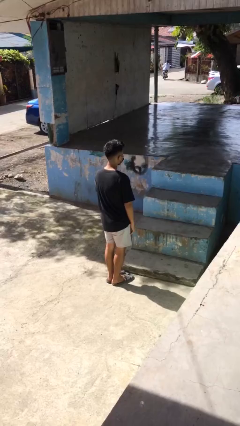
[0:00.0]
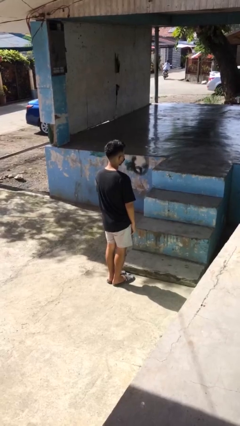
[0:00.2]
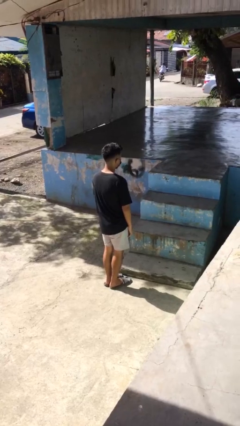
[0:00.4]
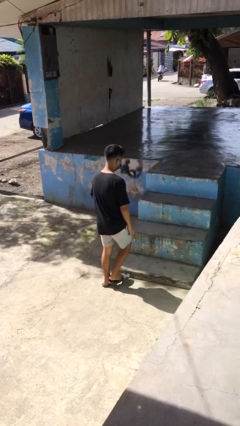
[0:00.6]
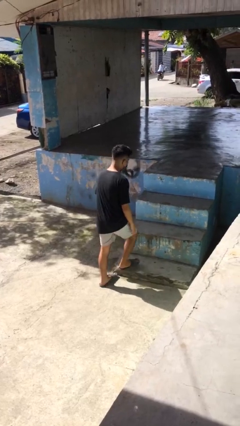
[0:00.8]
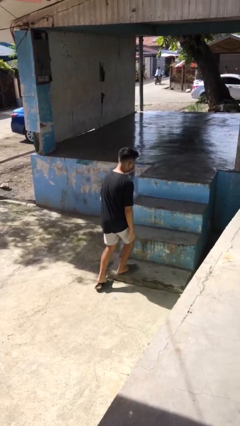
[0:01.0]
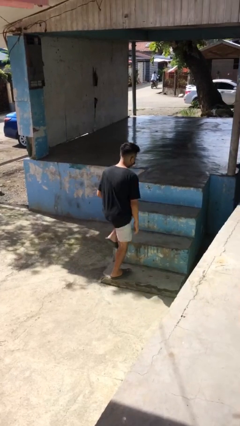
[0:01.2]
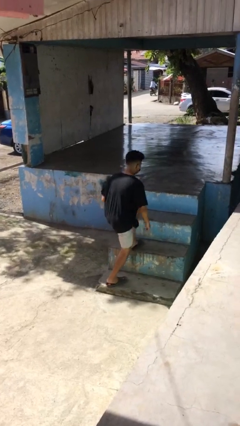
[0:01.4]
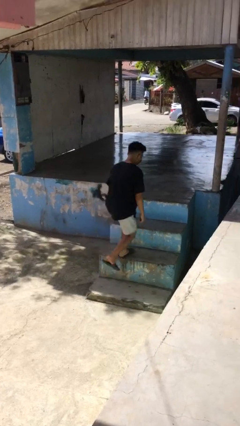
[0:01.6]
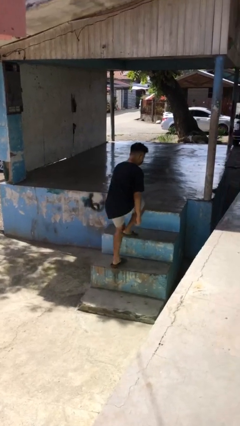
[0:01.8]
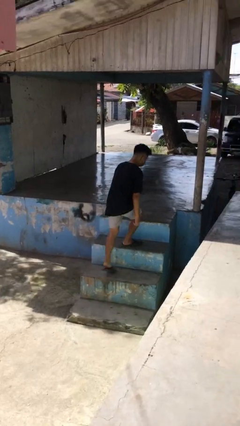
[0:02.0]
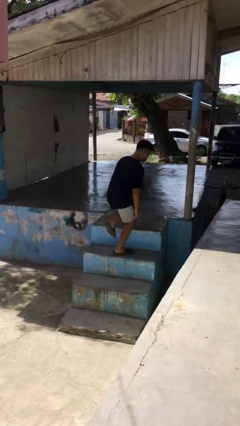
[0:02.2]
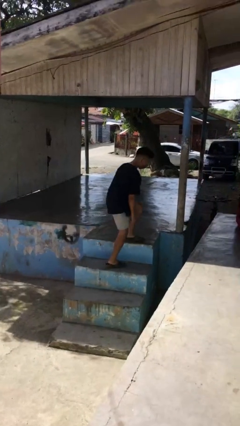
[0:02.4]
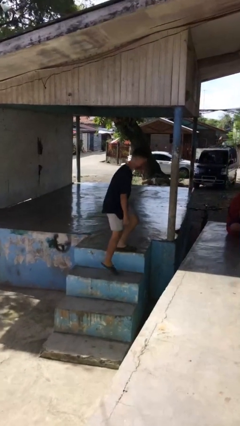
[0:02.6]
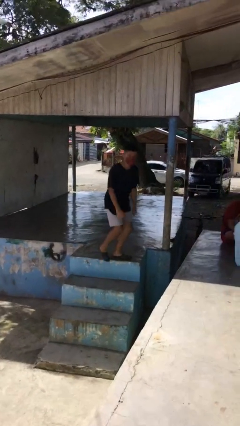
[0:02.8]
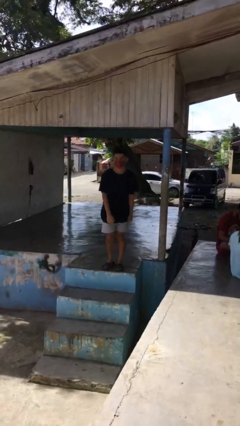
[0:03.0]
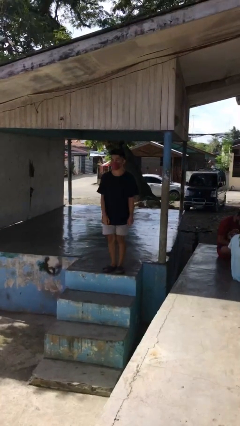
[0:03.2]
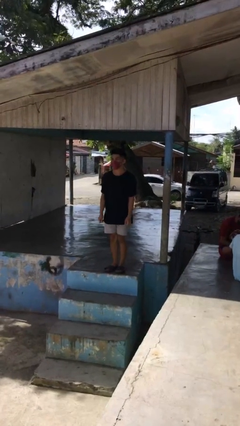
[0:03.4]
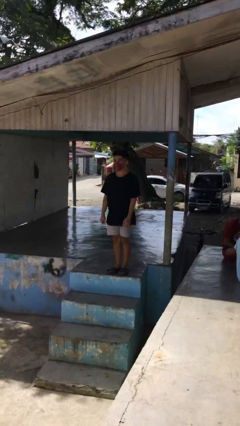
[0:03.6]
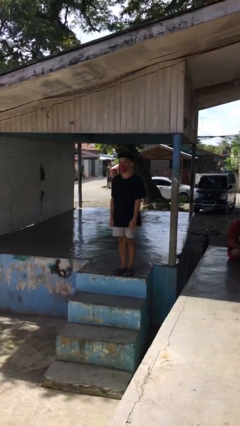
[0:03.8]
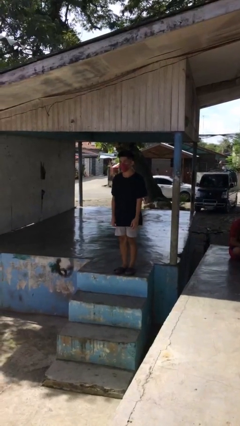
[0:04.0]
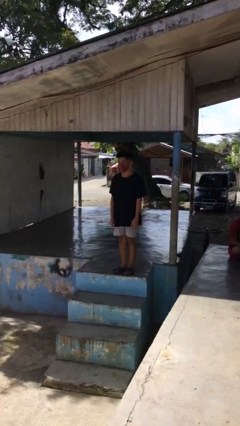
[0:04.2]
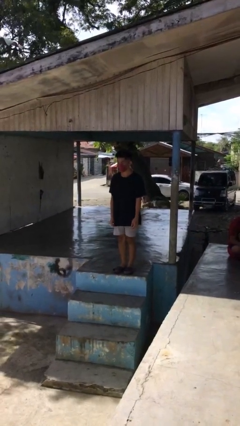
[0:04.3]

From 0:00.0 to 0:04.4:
person climbs up stairs

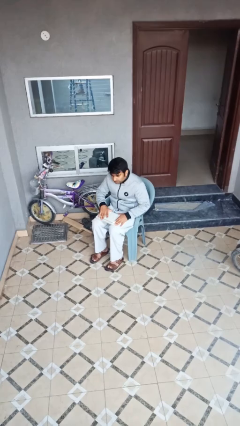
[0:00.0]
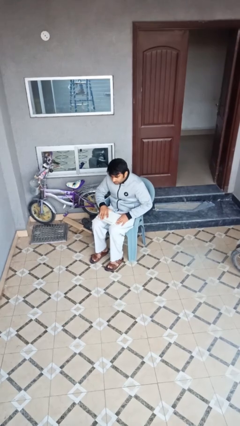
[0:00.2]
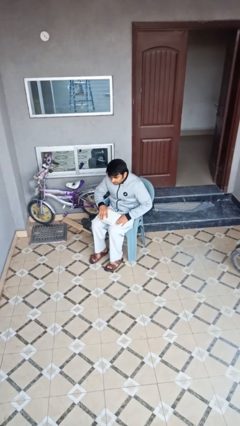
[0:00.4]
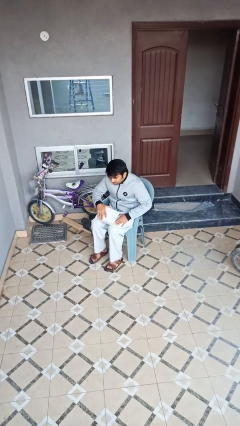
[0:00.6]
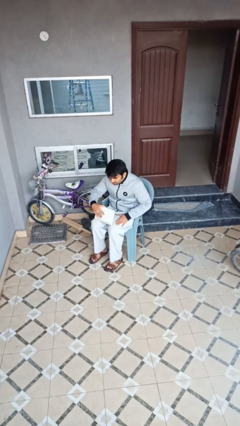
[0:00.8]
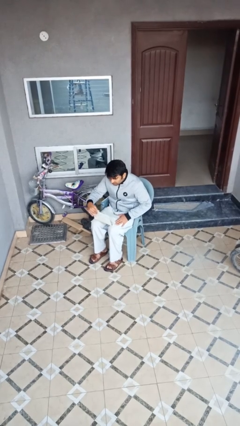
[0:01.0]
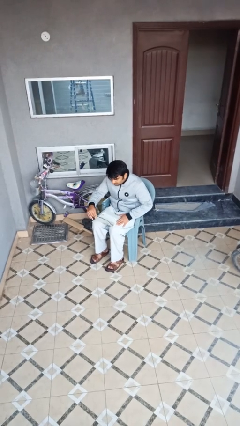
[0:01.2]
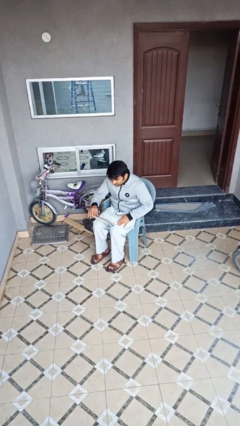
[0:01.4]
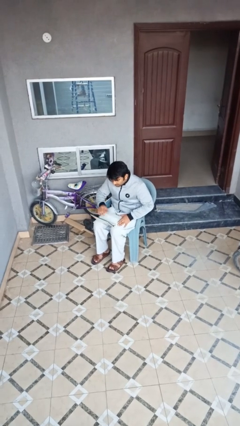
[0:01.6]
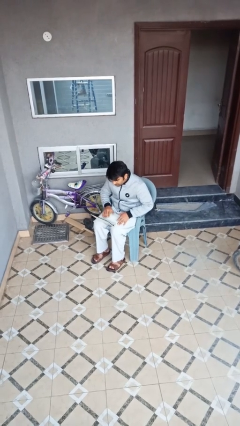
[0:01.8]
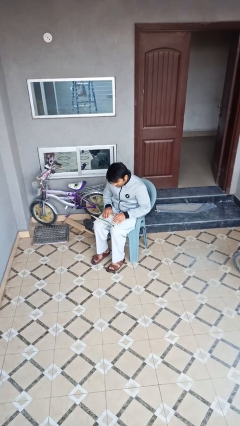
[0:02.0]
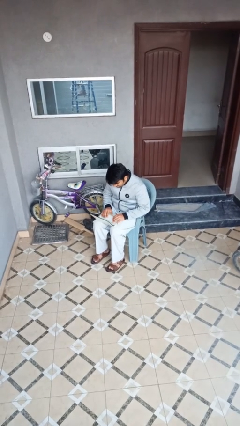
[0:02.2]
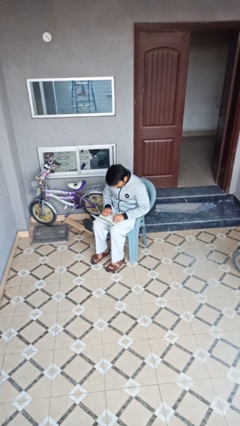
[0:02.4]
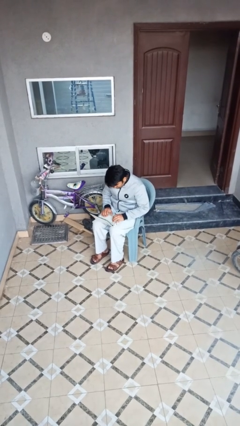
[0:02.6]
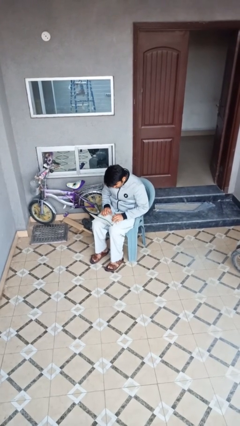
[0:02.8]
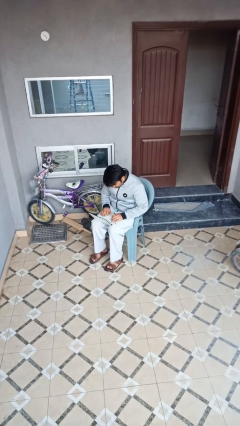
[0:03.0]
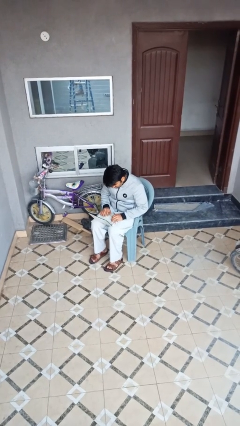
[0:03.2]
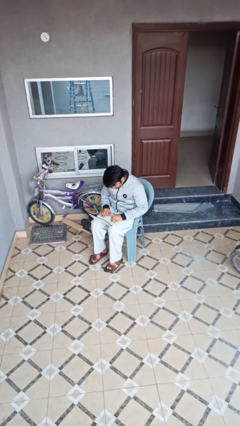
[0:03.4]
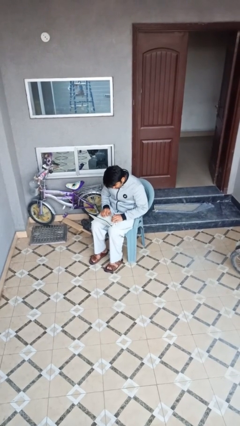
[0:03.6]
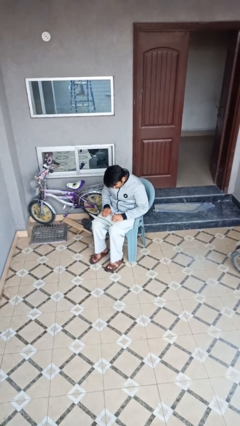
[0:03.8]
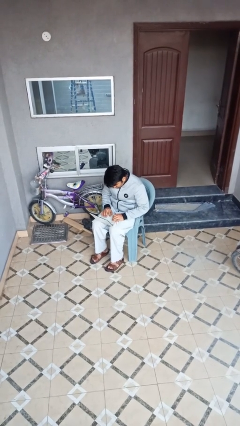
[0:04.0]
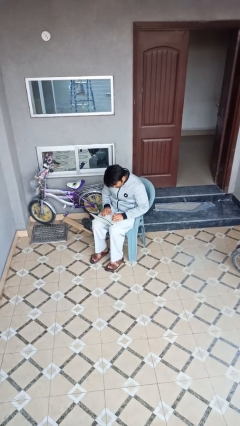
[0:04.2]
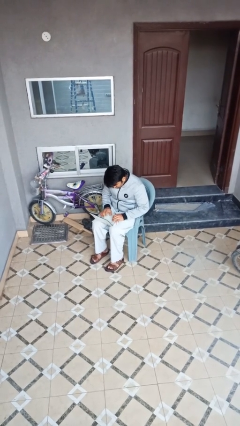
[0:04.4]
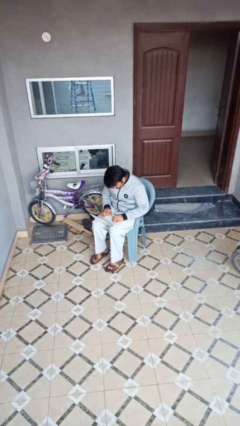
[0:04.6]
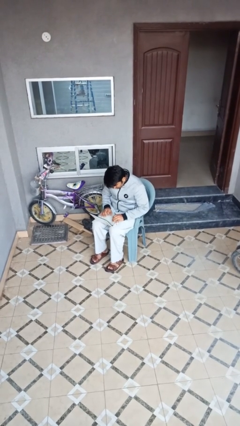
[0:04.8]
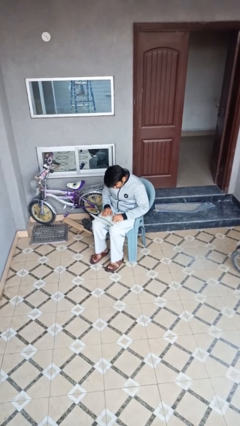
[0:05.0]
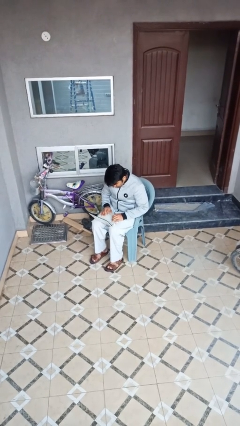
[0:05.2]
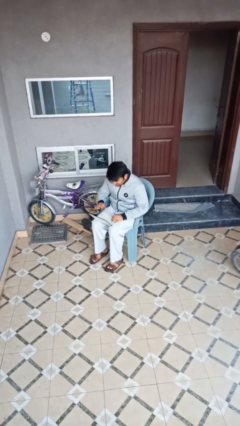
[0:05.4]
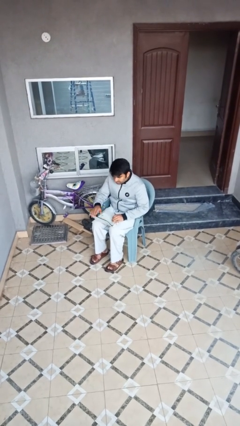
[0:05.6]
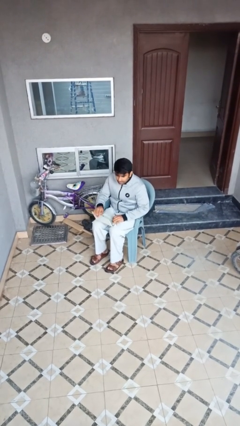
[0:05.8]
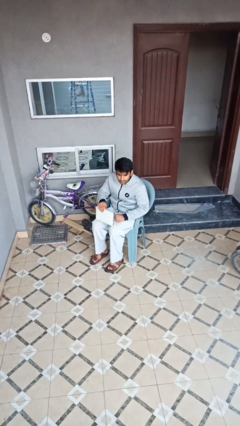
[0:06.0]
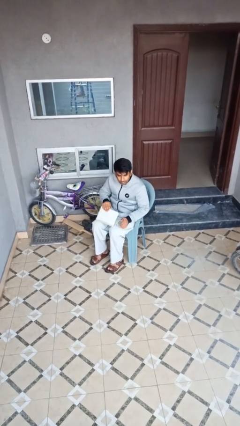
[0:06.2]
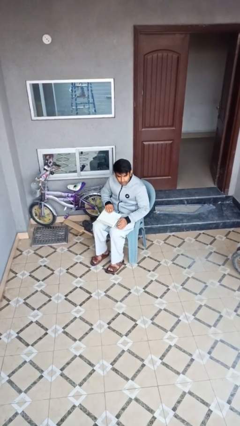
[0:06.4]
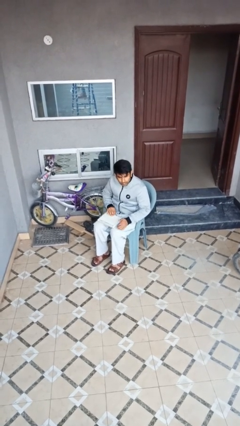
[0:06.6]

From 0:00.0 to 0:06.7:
person interacts with laptop

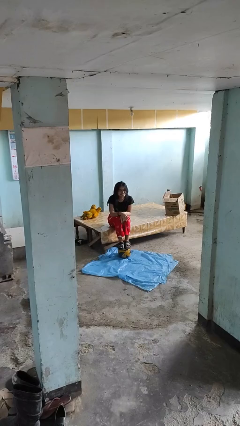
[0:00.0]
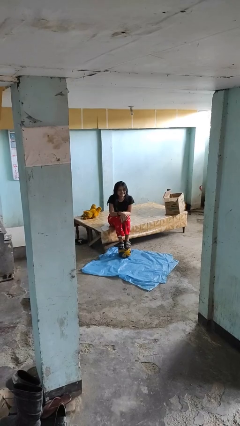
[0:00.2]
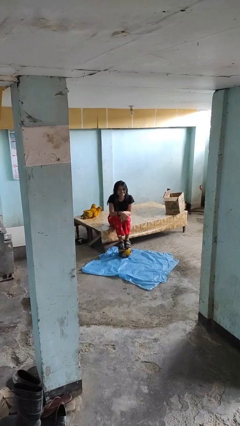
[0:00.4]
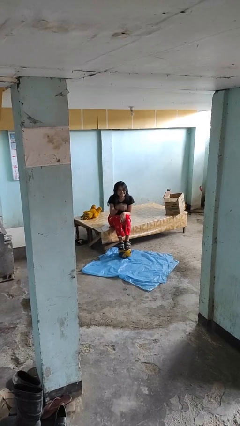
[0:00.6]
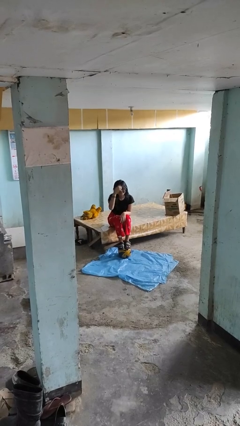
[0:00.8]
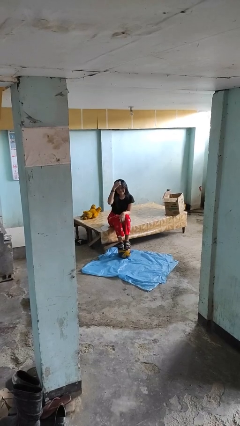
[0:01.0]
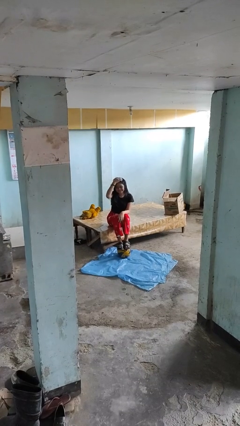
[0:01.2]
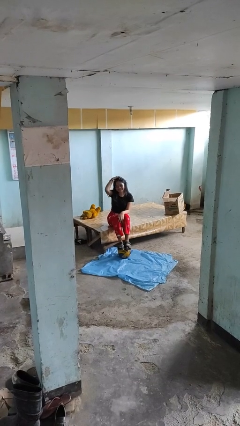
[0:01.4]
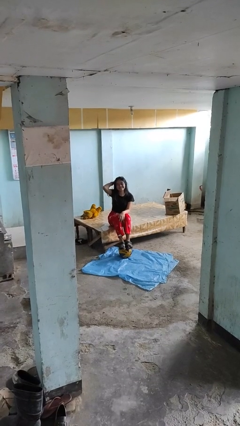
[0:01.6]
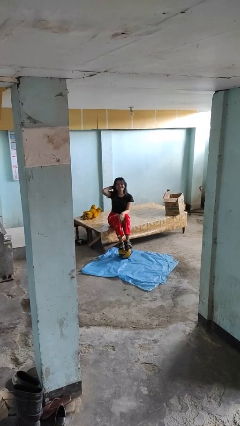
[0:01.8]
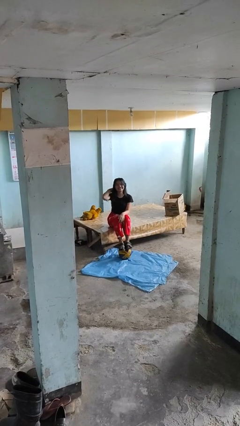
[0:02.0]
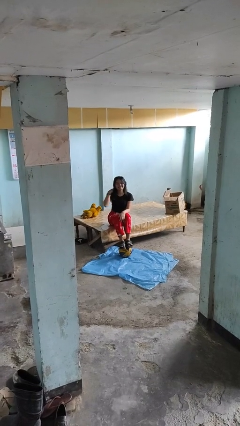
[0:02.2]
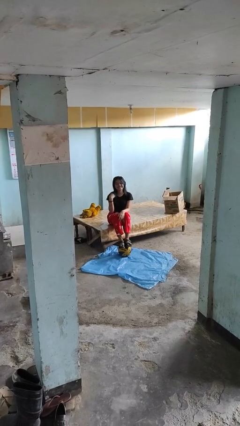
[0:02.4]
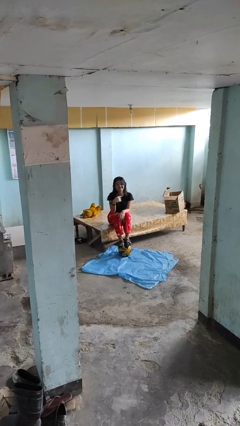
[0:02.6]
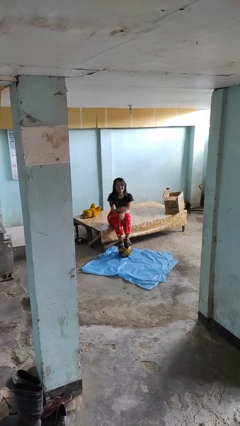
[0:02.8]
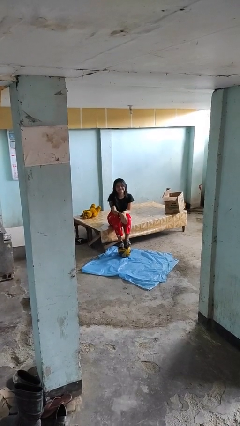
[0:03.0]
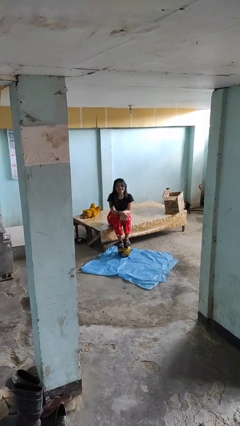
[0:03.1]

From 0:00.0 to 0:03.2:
person strokes hair

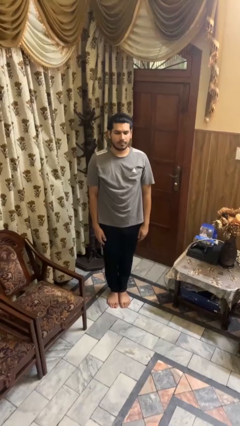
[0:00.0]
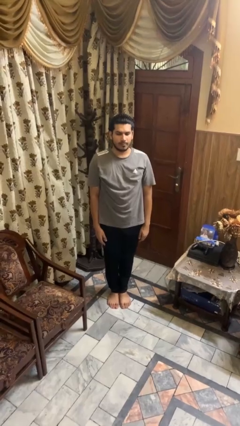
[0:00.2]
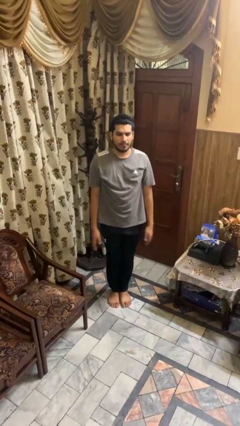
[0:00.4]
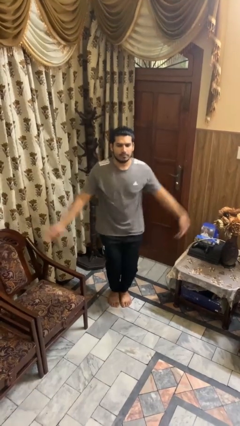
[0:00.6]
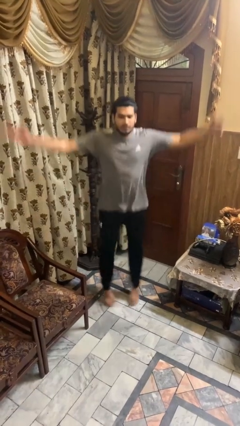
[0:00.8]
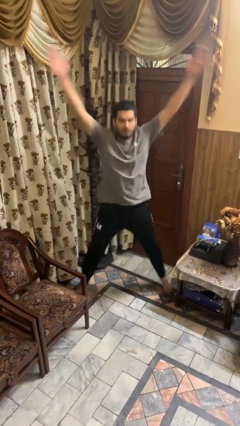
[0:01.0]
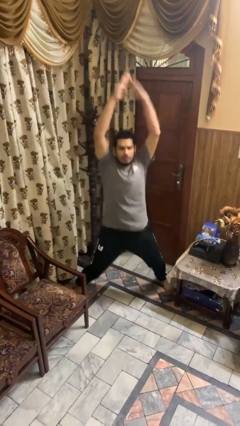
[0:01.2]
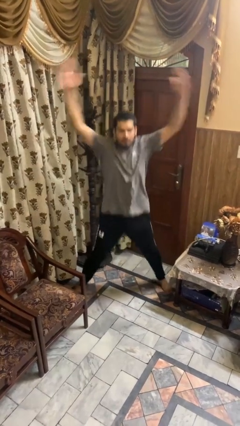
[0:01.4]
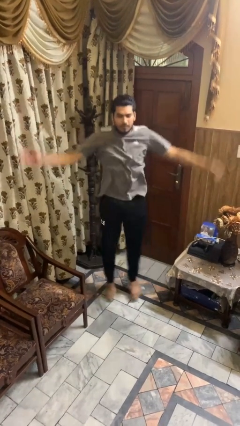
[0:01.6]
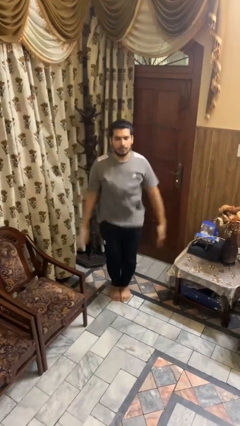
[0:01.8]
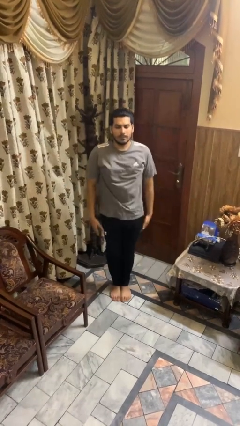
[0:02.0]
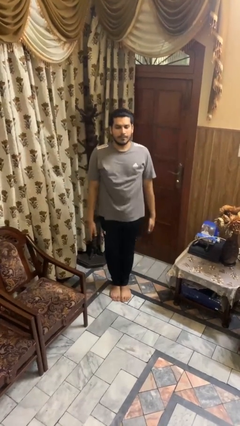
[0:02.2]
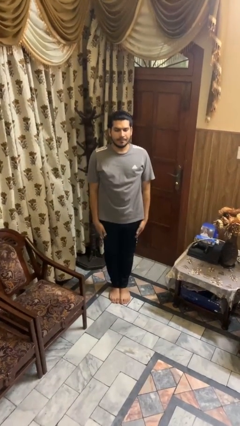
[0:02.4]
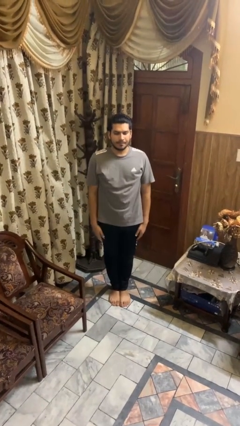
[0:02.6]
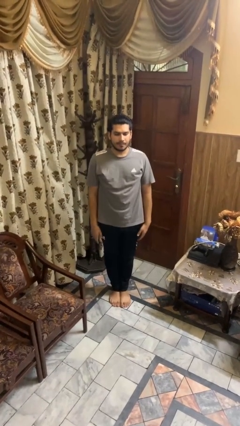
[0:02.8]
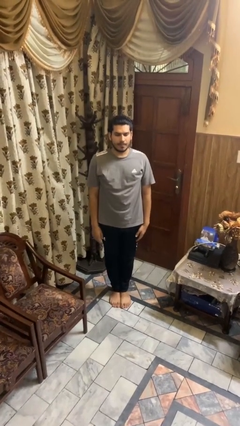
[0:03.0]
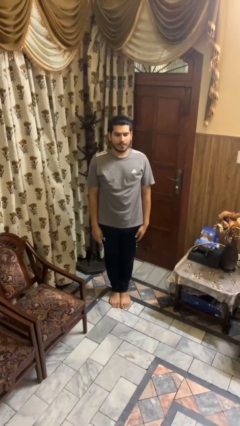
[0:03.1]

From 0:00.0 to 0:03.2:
person exercises with jumping jacks

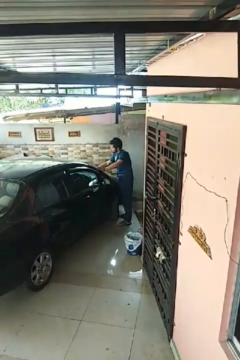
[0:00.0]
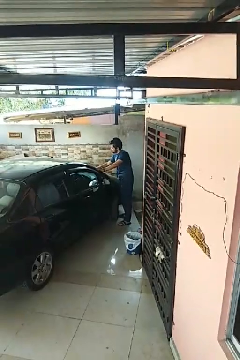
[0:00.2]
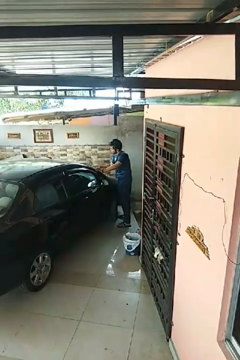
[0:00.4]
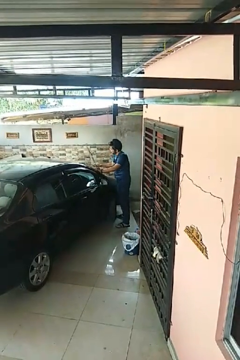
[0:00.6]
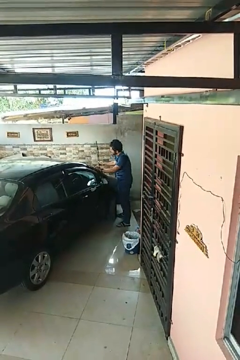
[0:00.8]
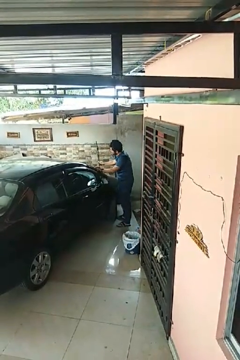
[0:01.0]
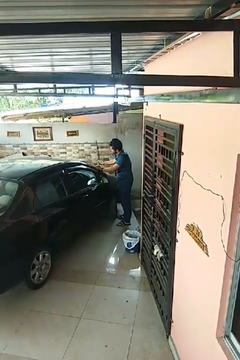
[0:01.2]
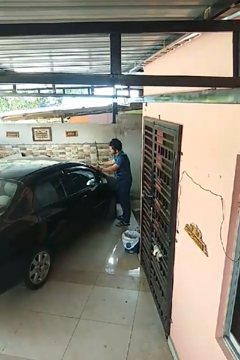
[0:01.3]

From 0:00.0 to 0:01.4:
person flips up car wipers
